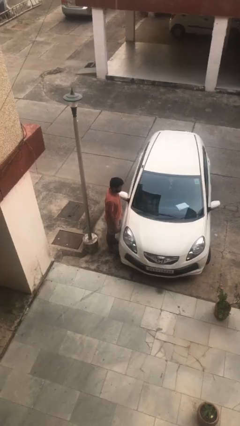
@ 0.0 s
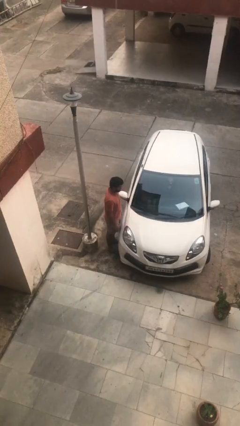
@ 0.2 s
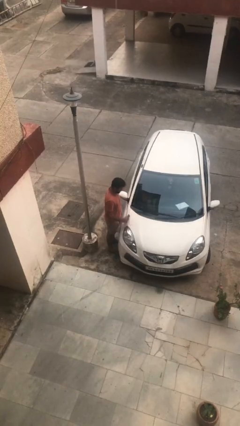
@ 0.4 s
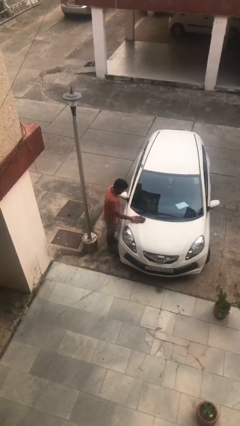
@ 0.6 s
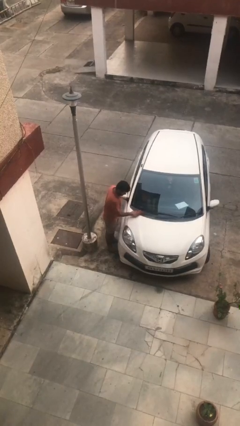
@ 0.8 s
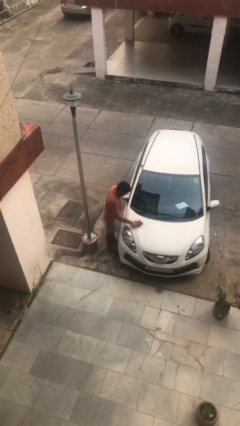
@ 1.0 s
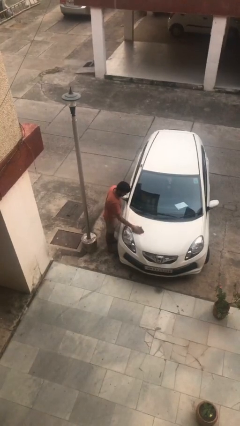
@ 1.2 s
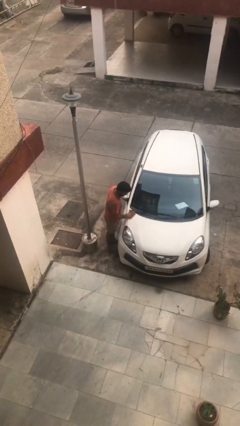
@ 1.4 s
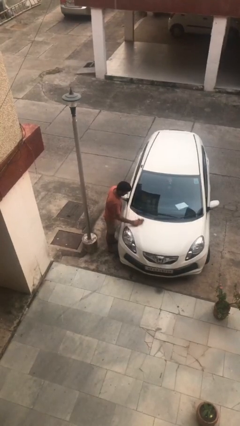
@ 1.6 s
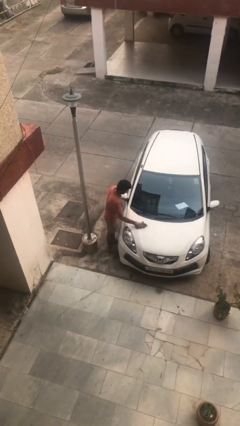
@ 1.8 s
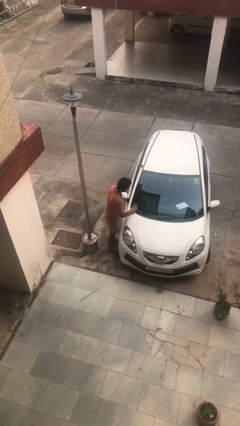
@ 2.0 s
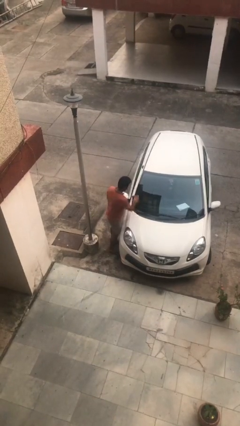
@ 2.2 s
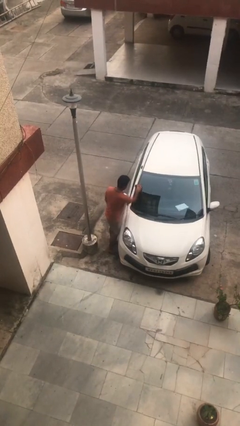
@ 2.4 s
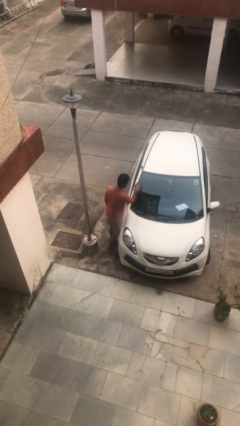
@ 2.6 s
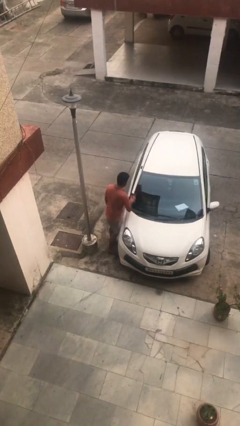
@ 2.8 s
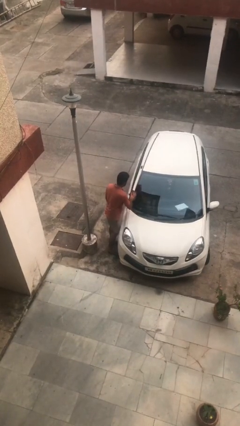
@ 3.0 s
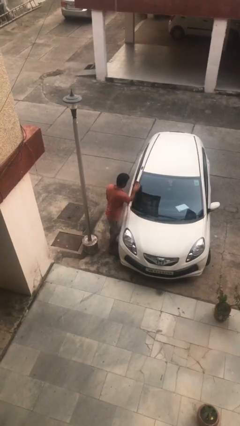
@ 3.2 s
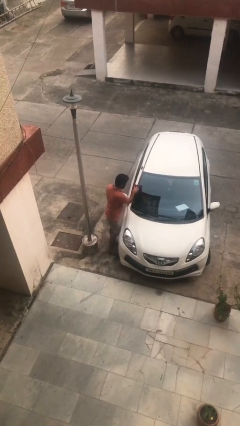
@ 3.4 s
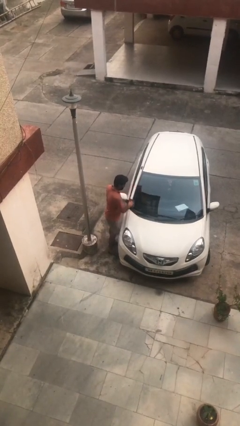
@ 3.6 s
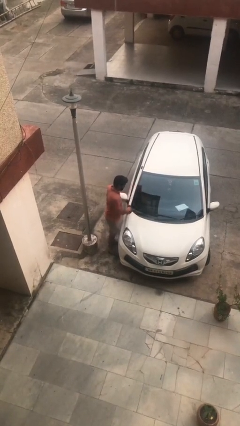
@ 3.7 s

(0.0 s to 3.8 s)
person polishes car with rag

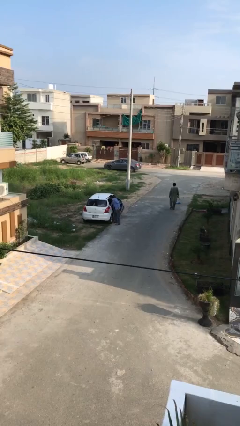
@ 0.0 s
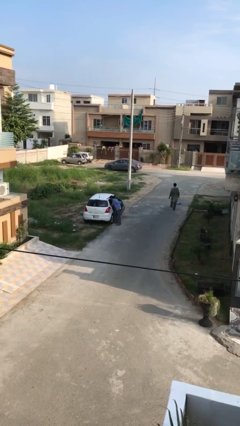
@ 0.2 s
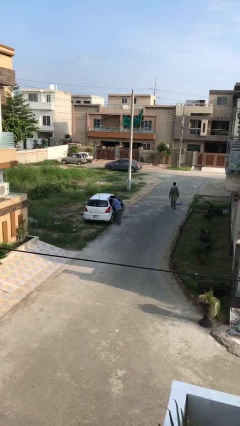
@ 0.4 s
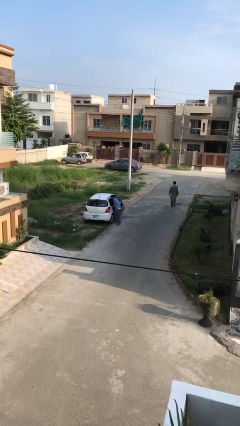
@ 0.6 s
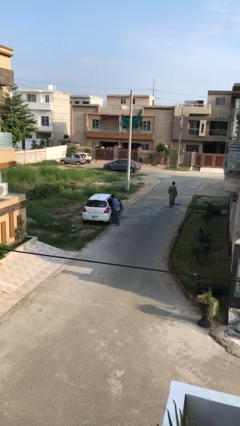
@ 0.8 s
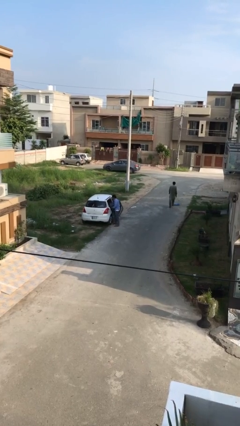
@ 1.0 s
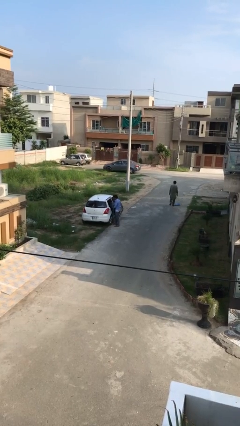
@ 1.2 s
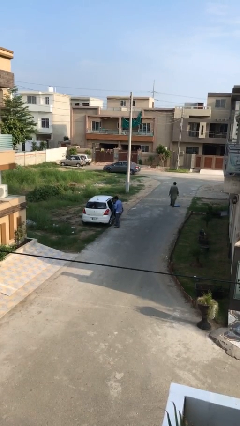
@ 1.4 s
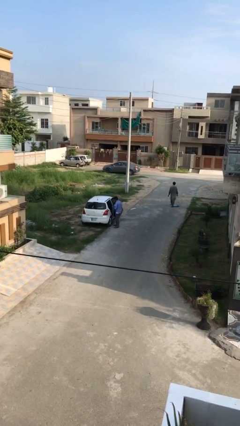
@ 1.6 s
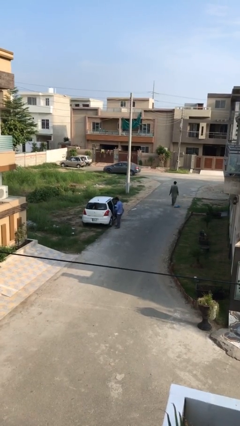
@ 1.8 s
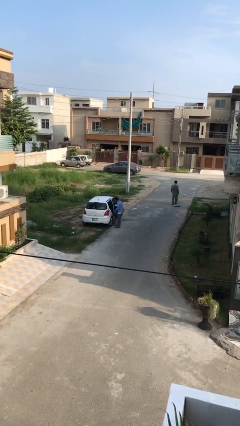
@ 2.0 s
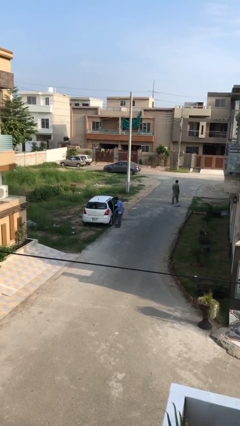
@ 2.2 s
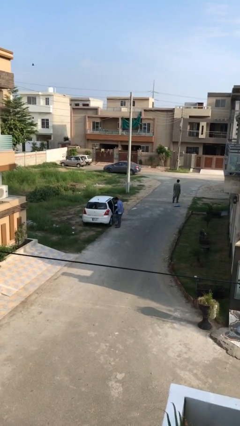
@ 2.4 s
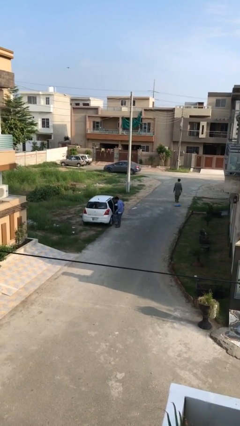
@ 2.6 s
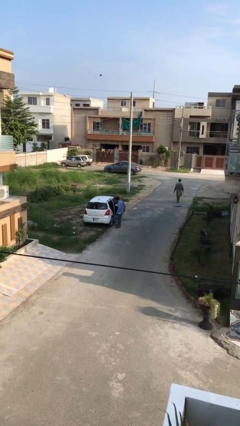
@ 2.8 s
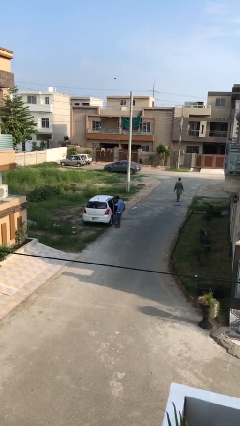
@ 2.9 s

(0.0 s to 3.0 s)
person unloads car

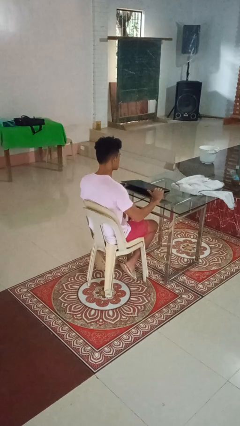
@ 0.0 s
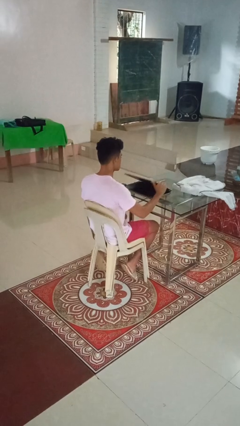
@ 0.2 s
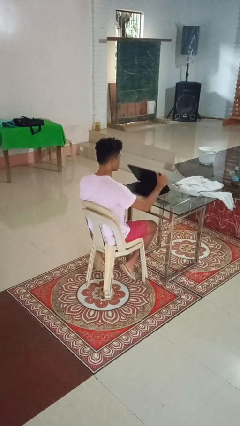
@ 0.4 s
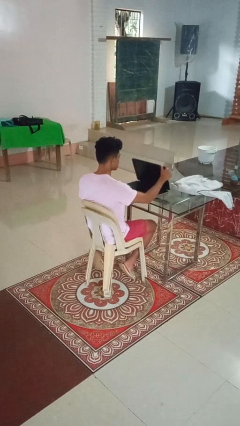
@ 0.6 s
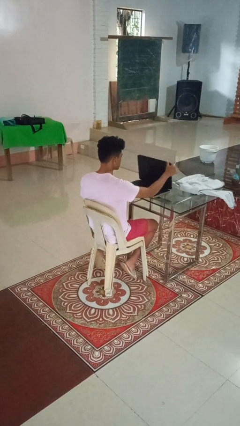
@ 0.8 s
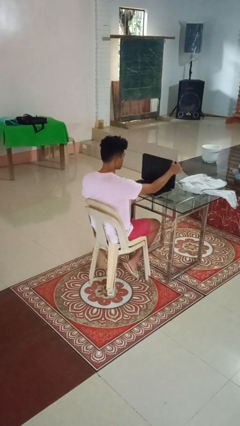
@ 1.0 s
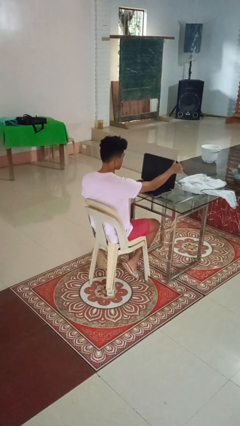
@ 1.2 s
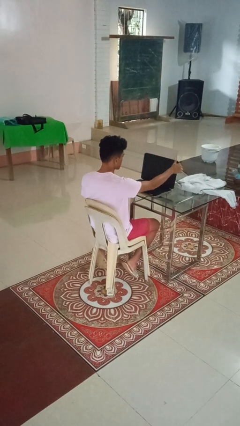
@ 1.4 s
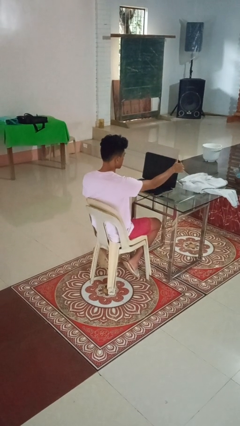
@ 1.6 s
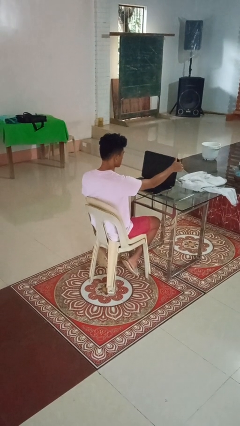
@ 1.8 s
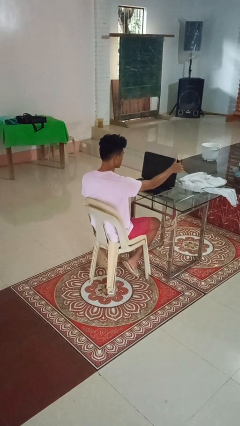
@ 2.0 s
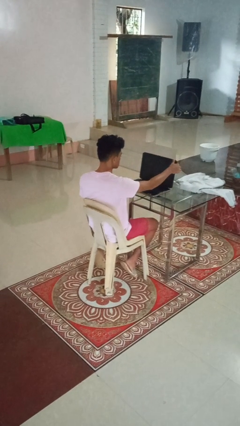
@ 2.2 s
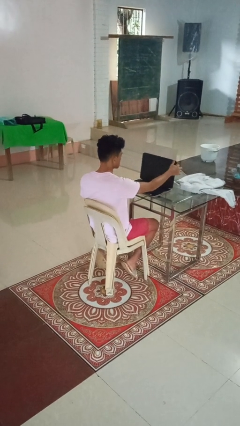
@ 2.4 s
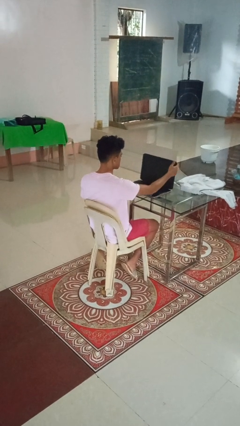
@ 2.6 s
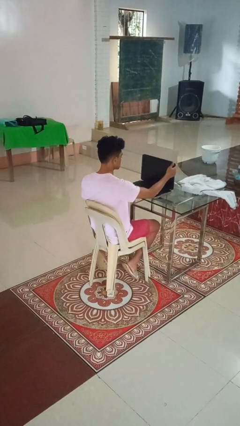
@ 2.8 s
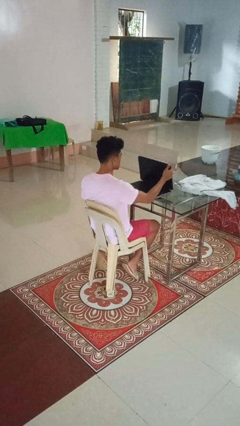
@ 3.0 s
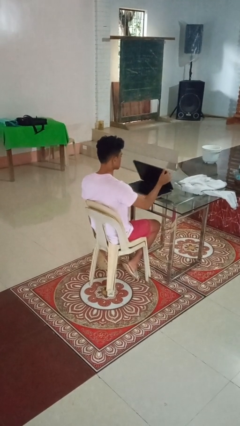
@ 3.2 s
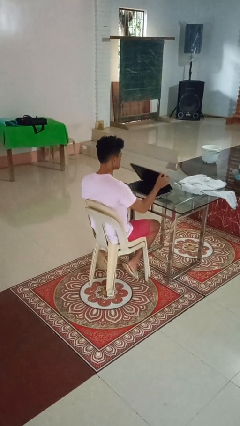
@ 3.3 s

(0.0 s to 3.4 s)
person opens laptop

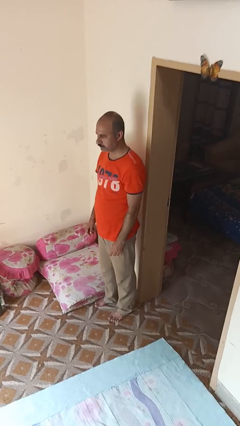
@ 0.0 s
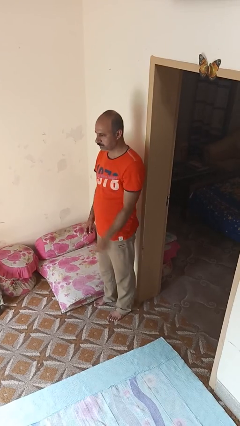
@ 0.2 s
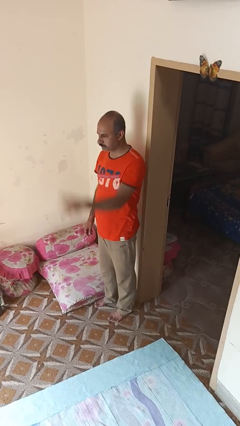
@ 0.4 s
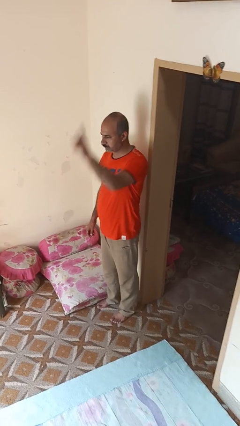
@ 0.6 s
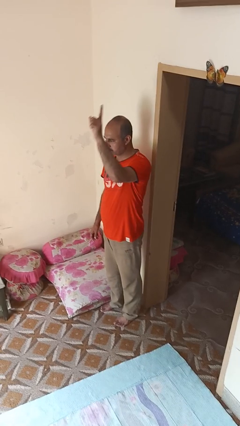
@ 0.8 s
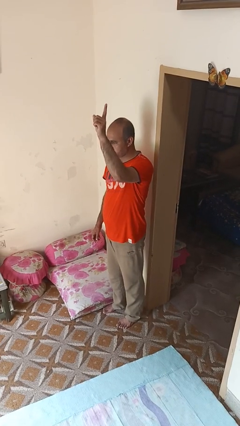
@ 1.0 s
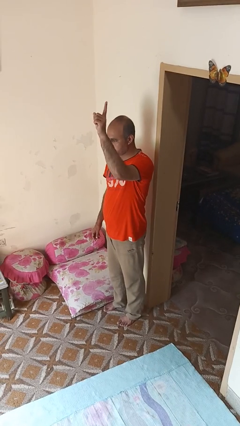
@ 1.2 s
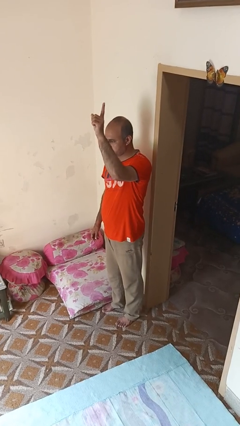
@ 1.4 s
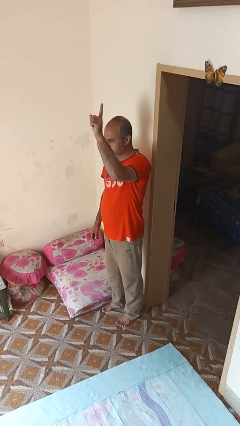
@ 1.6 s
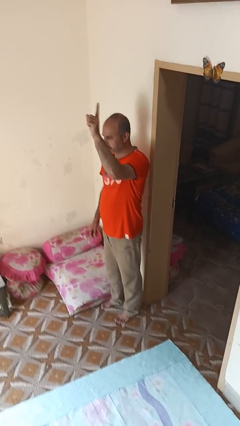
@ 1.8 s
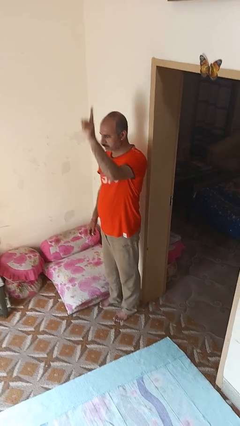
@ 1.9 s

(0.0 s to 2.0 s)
person gestures swipe up

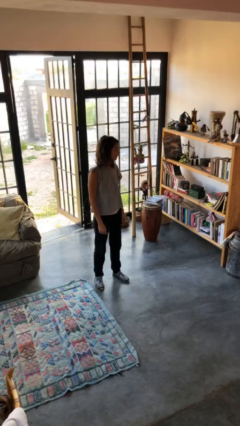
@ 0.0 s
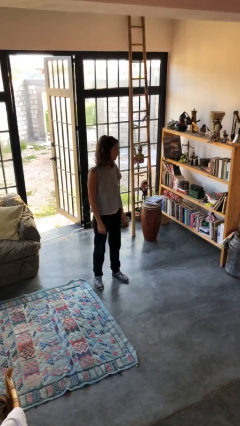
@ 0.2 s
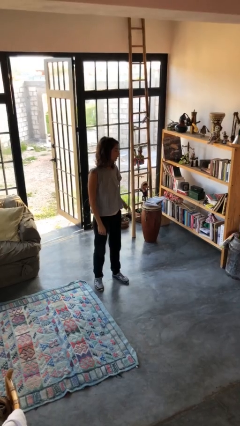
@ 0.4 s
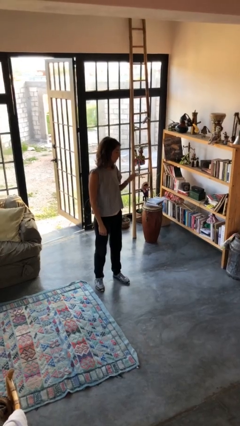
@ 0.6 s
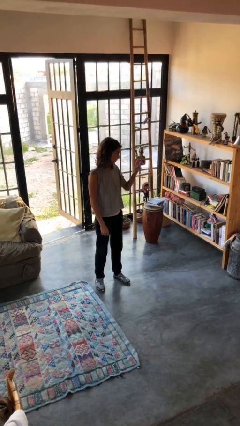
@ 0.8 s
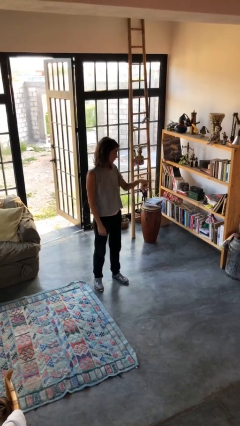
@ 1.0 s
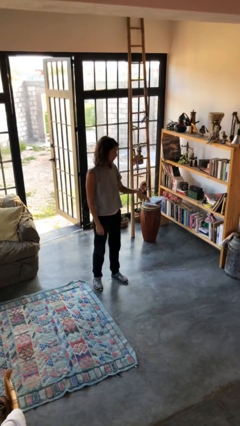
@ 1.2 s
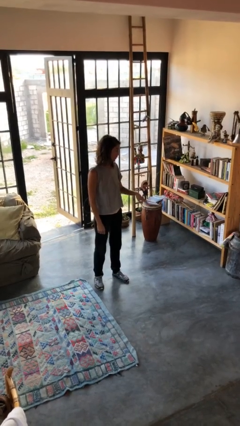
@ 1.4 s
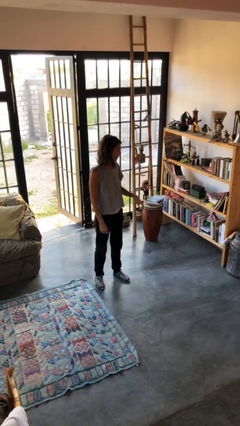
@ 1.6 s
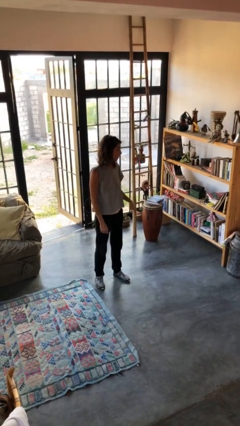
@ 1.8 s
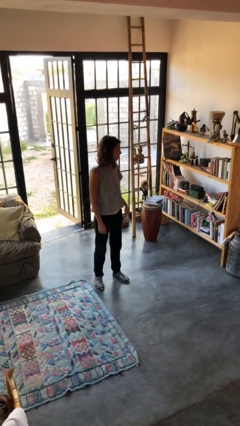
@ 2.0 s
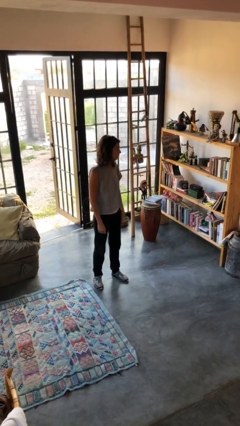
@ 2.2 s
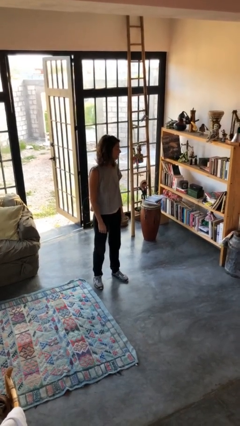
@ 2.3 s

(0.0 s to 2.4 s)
person gestures swipe down

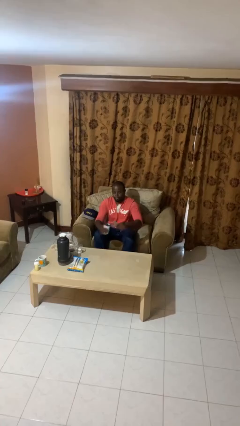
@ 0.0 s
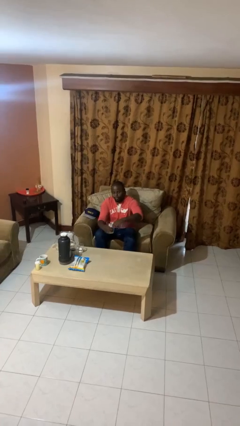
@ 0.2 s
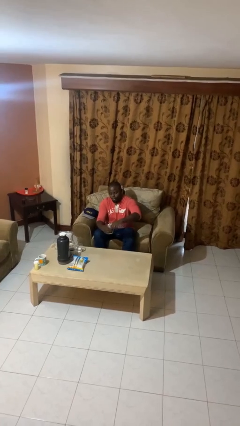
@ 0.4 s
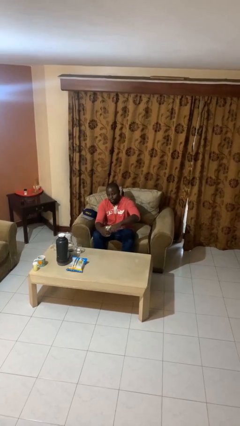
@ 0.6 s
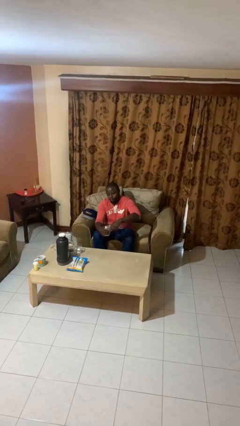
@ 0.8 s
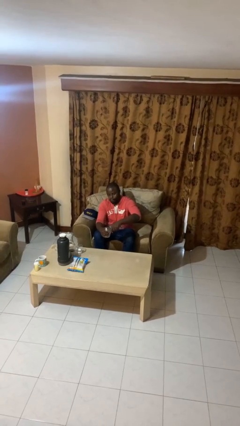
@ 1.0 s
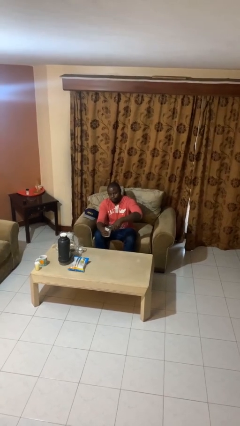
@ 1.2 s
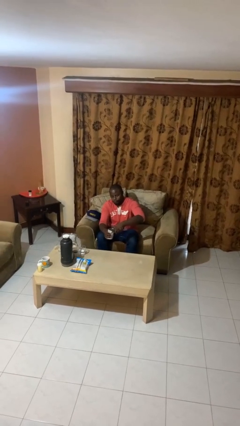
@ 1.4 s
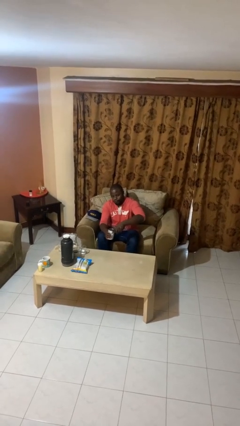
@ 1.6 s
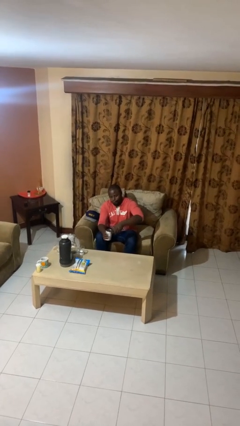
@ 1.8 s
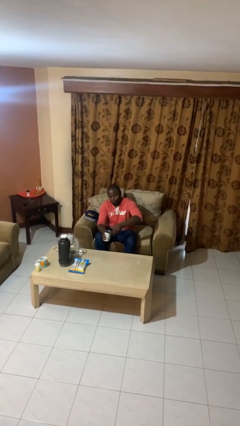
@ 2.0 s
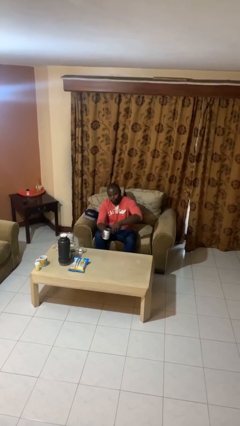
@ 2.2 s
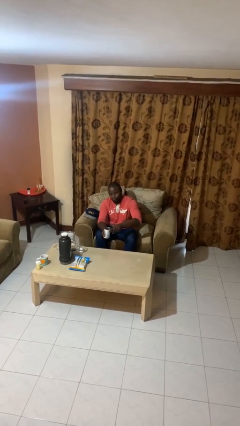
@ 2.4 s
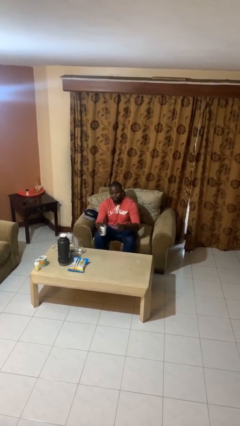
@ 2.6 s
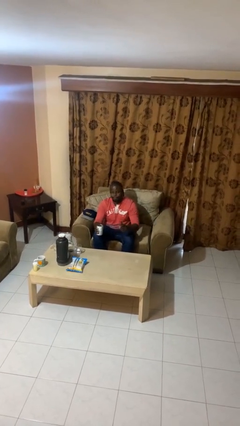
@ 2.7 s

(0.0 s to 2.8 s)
person opens can with can opener

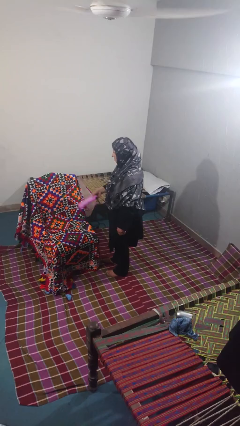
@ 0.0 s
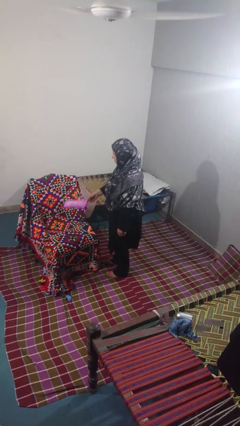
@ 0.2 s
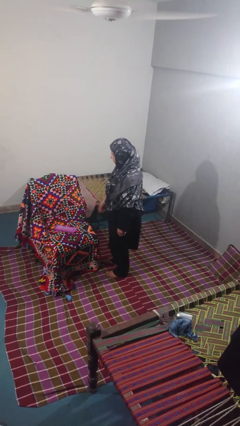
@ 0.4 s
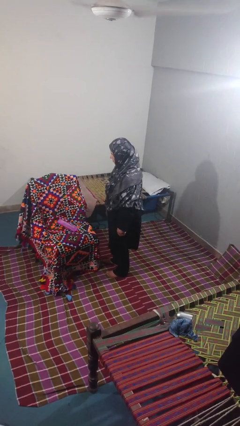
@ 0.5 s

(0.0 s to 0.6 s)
person puts down object on couch
